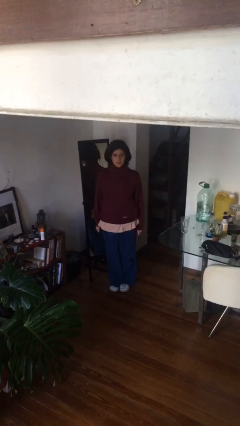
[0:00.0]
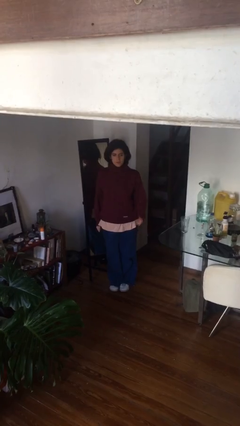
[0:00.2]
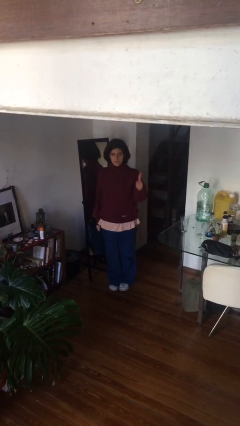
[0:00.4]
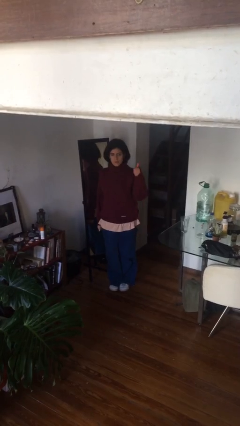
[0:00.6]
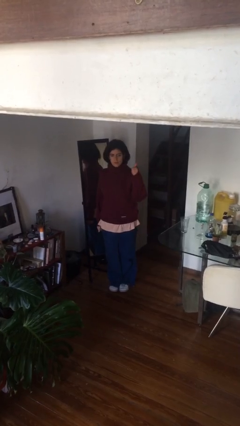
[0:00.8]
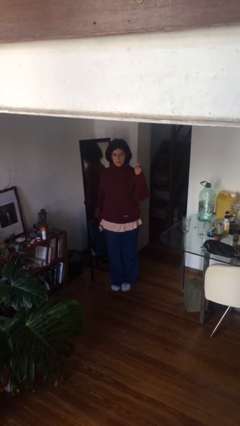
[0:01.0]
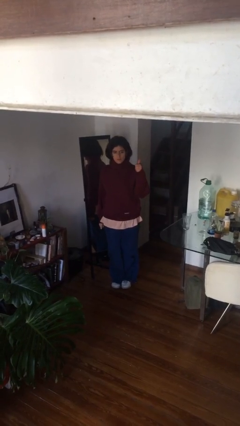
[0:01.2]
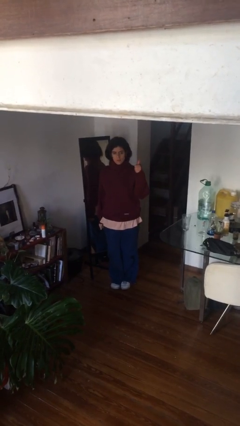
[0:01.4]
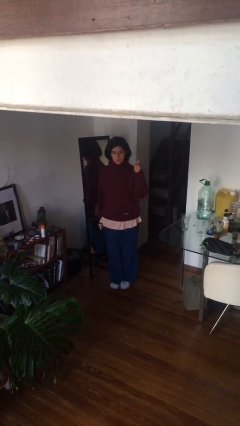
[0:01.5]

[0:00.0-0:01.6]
person gestures thumbs up

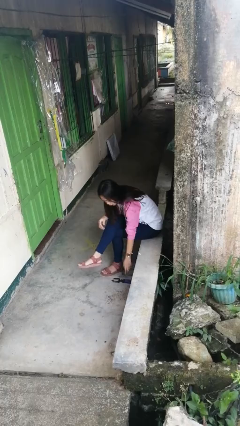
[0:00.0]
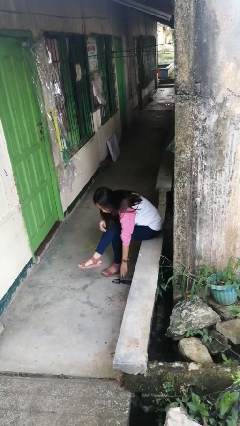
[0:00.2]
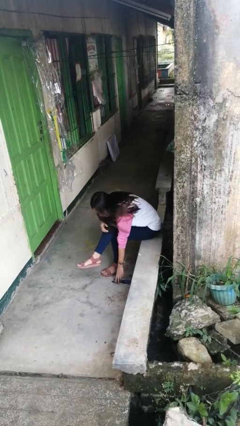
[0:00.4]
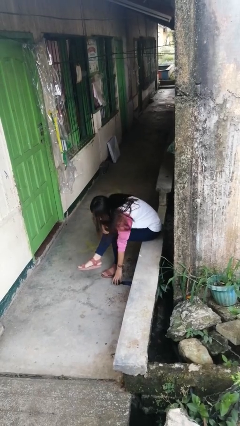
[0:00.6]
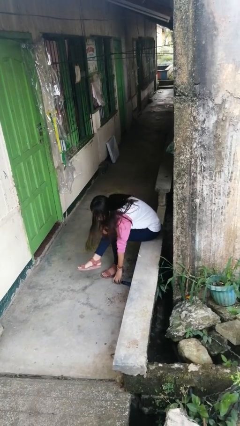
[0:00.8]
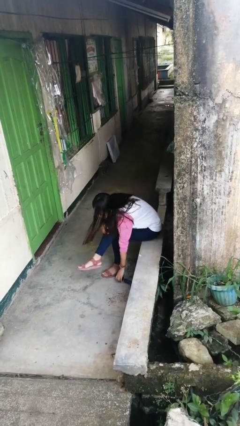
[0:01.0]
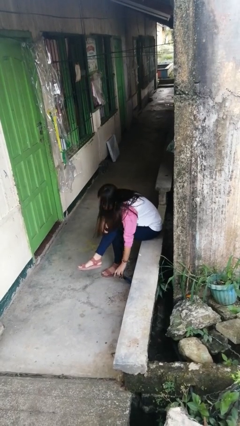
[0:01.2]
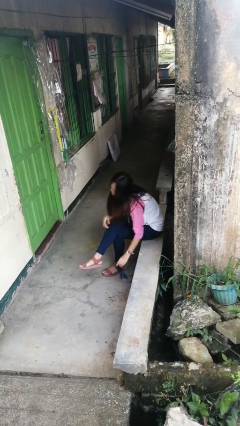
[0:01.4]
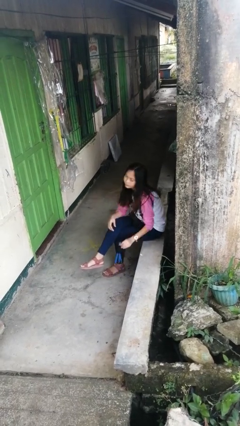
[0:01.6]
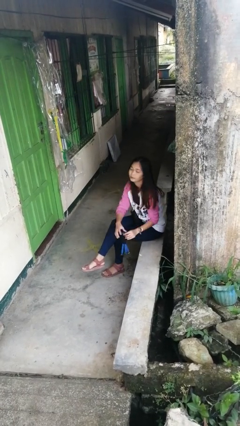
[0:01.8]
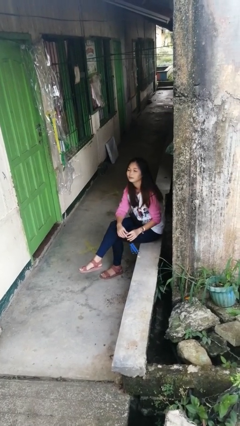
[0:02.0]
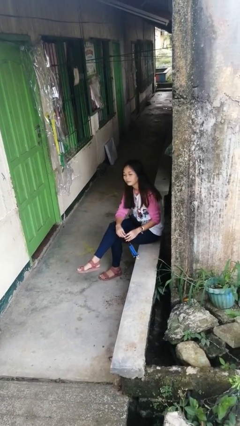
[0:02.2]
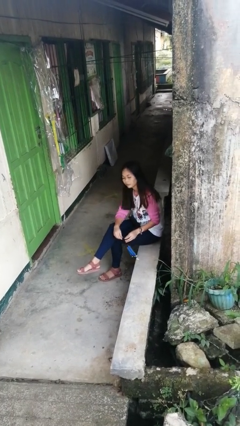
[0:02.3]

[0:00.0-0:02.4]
person picks up object from floor

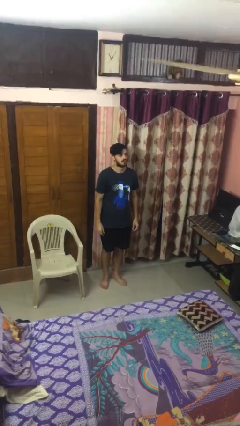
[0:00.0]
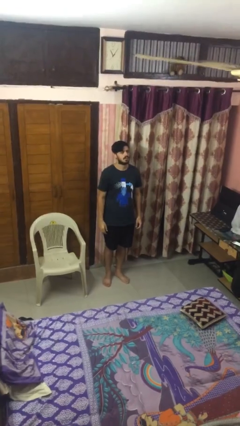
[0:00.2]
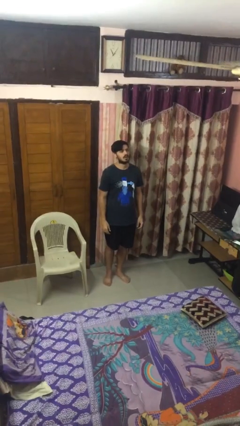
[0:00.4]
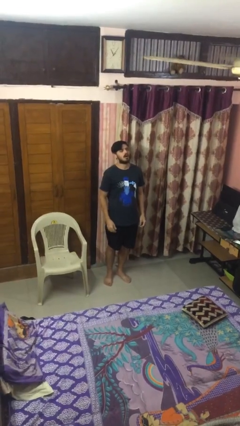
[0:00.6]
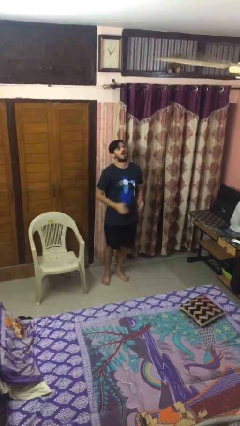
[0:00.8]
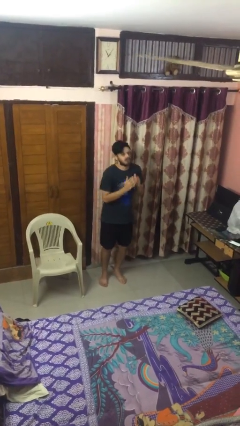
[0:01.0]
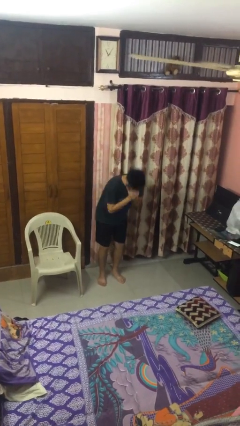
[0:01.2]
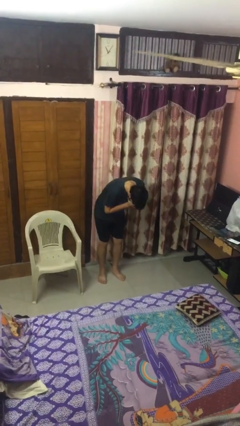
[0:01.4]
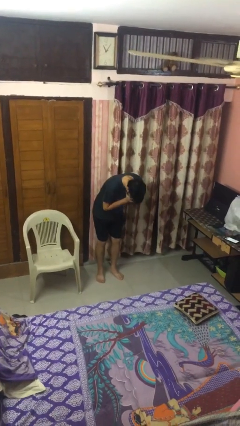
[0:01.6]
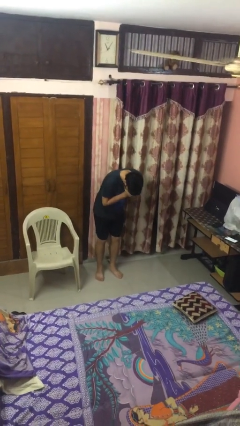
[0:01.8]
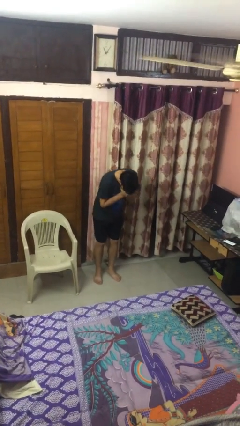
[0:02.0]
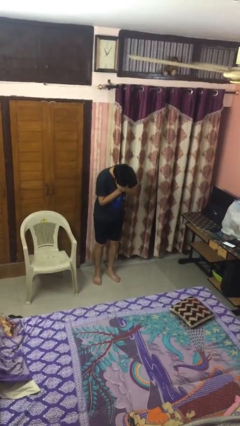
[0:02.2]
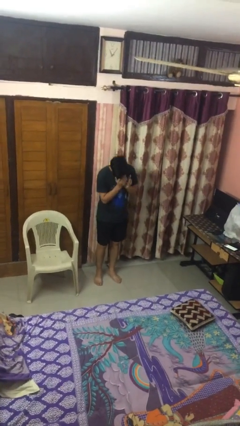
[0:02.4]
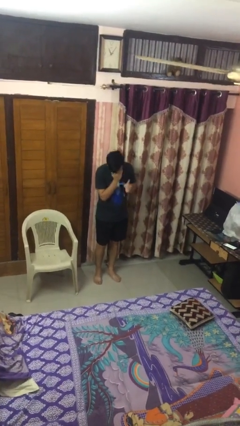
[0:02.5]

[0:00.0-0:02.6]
person sneezes into hand

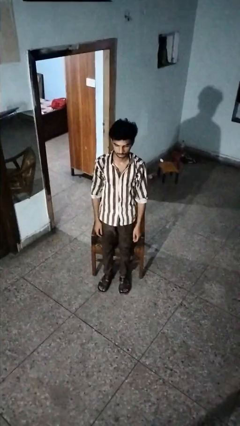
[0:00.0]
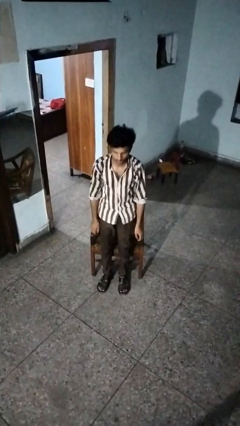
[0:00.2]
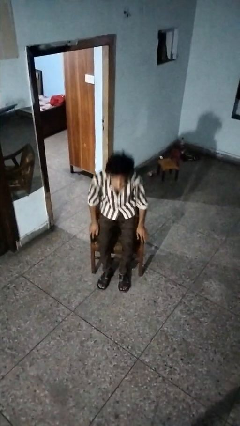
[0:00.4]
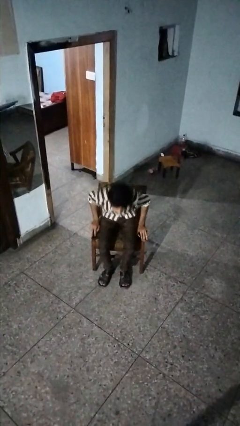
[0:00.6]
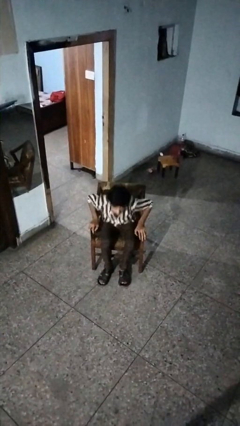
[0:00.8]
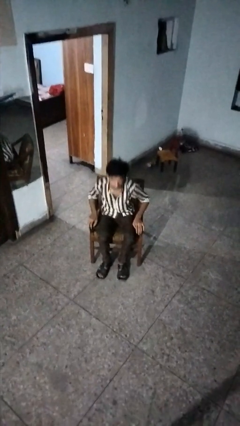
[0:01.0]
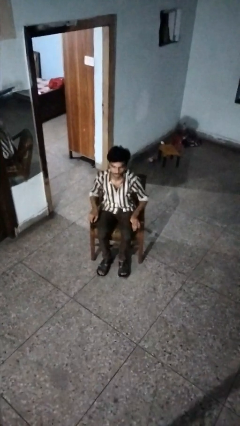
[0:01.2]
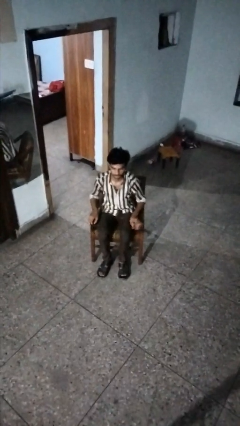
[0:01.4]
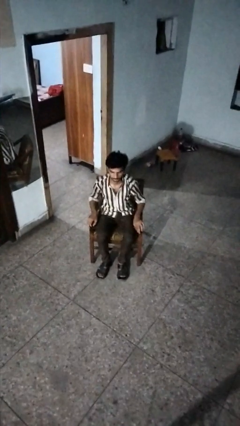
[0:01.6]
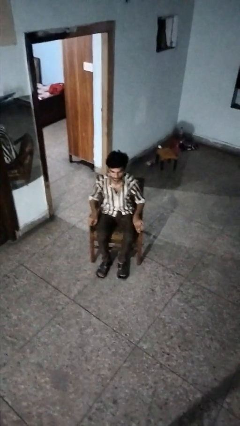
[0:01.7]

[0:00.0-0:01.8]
person sits down

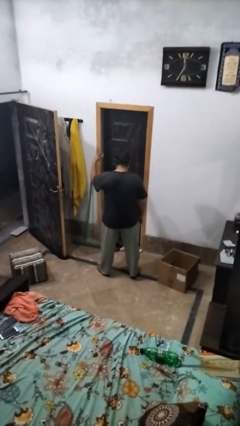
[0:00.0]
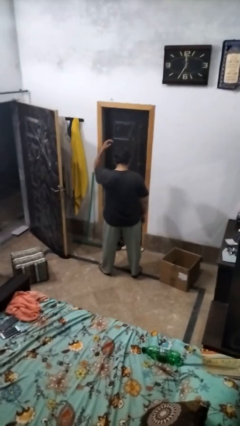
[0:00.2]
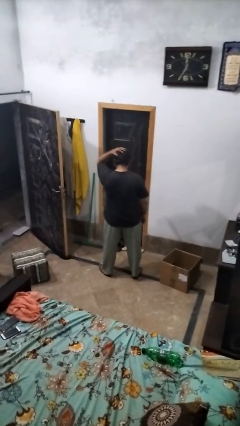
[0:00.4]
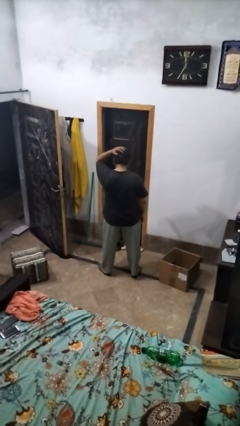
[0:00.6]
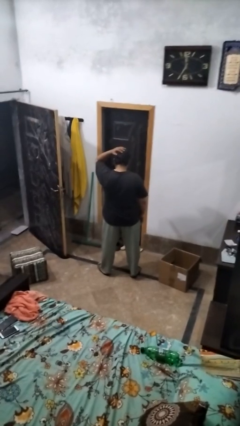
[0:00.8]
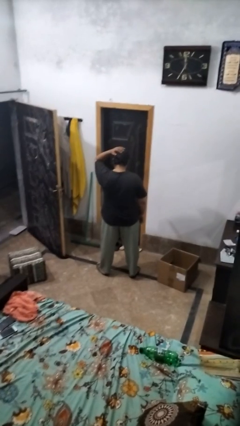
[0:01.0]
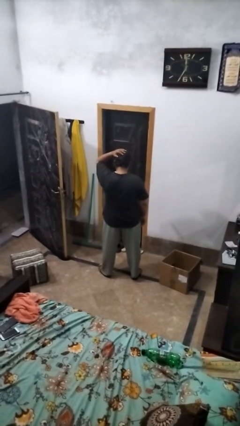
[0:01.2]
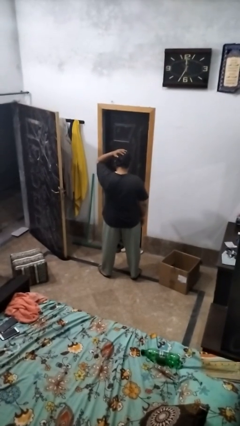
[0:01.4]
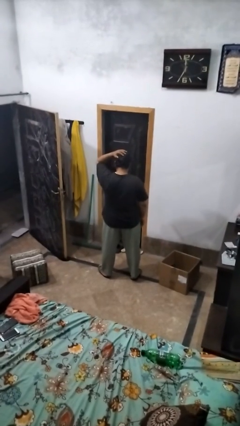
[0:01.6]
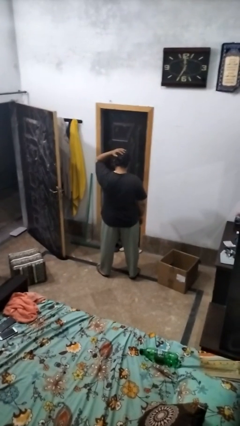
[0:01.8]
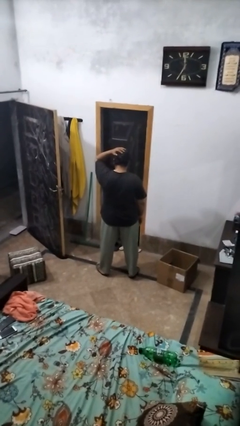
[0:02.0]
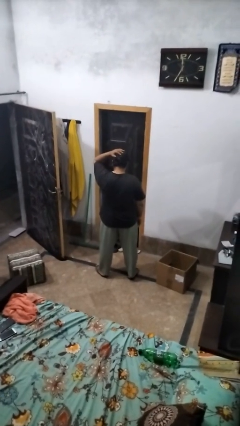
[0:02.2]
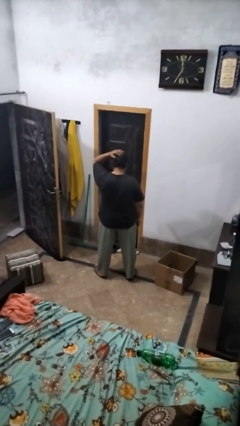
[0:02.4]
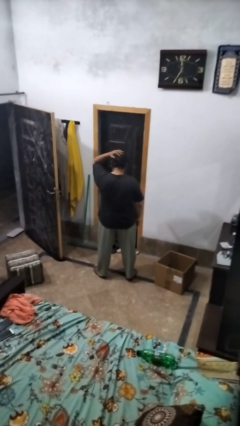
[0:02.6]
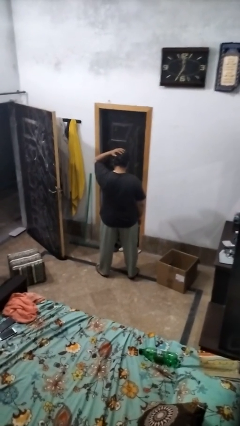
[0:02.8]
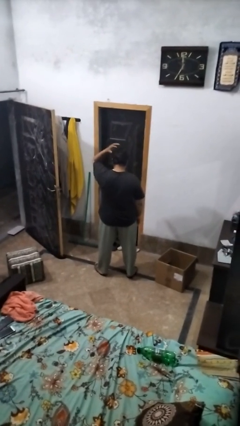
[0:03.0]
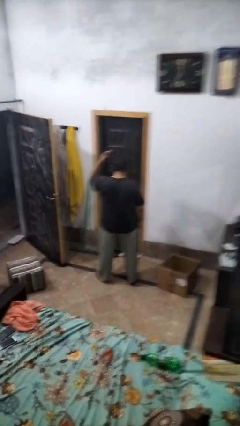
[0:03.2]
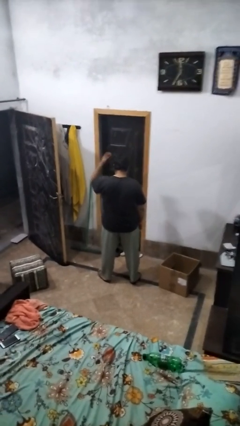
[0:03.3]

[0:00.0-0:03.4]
person pats head

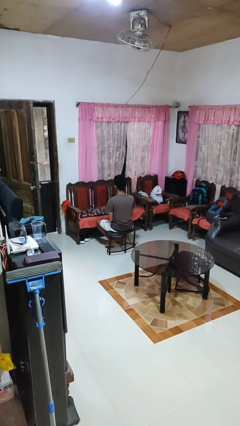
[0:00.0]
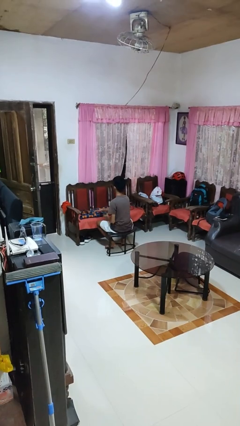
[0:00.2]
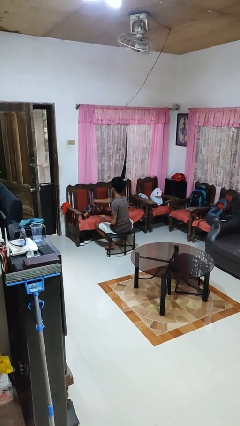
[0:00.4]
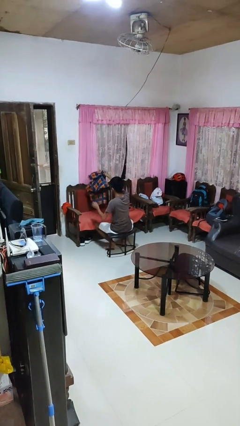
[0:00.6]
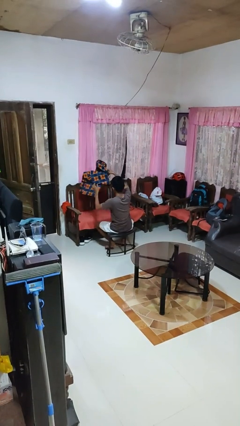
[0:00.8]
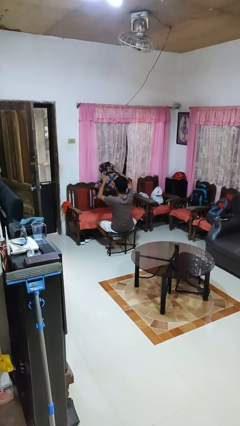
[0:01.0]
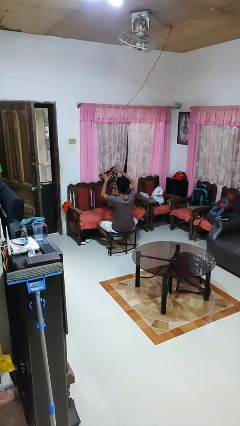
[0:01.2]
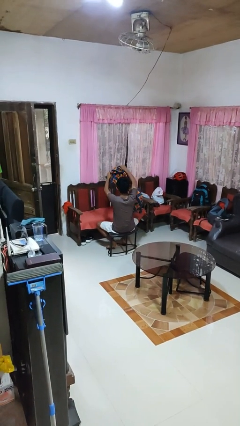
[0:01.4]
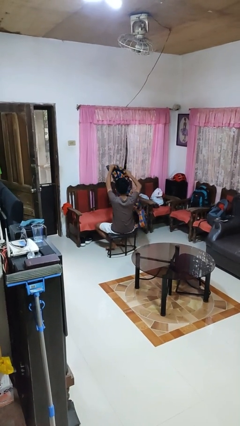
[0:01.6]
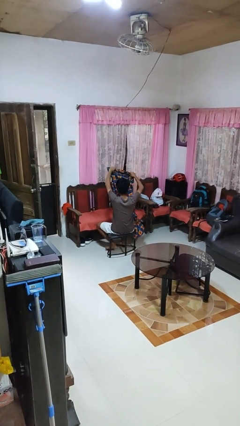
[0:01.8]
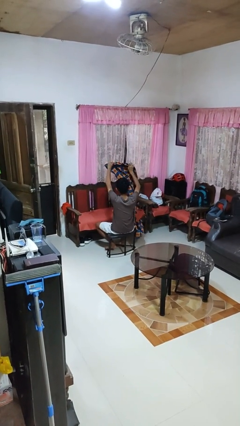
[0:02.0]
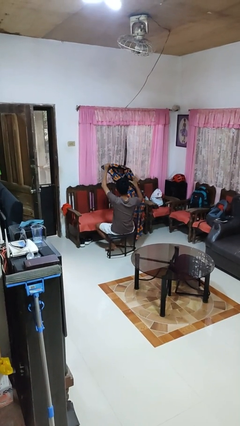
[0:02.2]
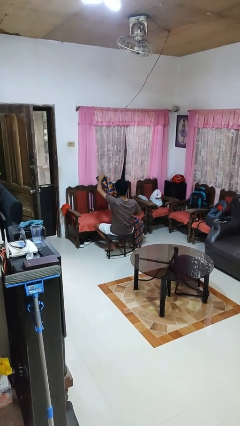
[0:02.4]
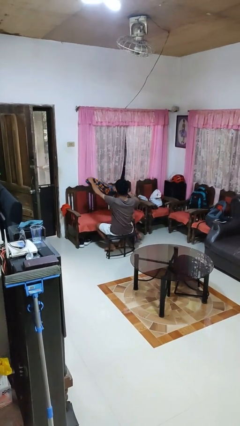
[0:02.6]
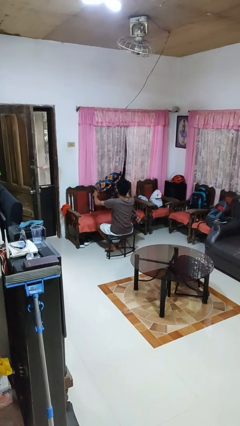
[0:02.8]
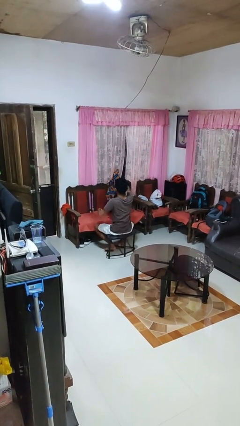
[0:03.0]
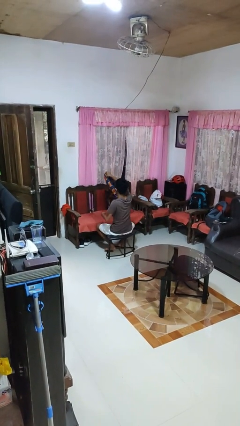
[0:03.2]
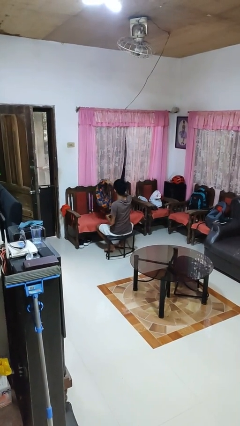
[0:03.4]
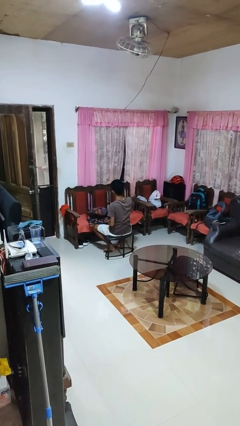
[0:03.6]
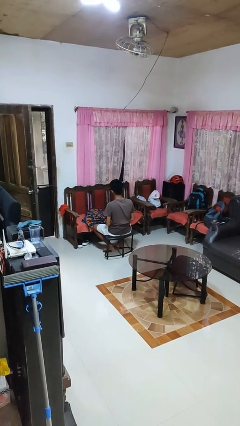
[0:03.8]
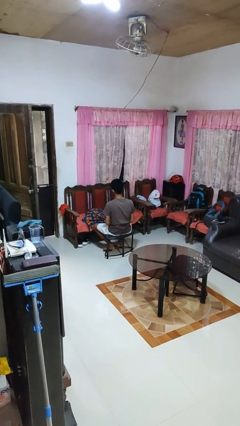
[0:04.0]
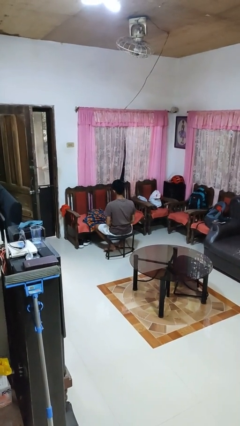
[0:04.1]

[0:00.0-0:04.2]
person unfolds blanket

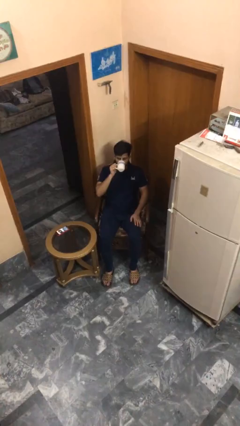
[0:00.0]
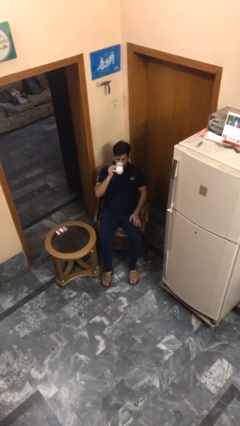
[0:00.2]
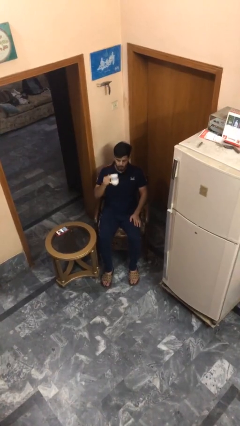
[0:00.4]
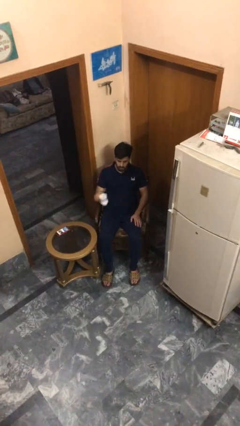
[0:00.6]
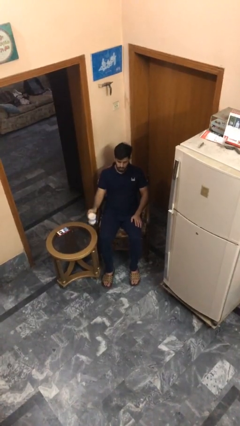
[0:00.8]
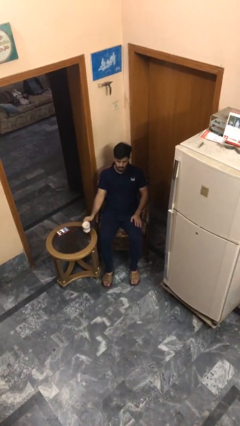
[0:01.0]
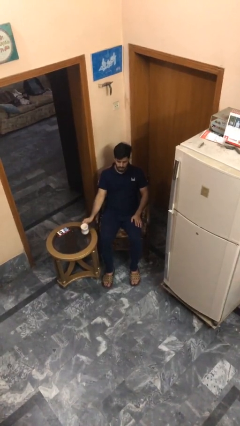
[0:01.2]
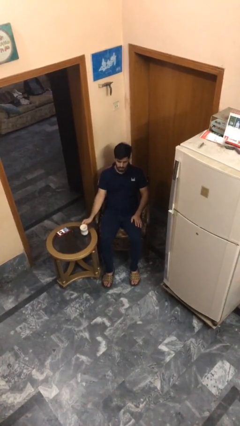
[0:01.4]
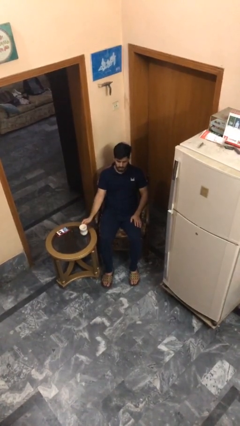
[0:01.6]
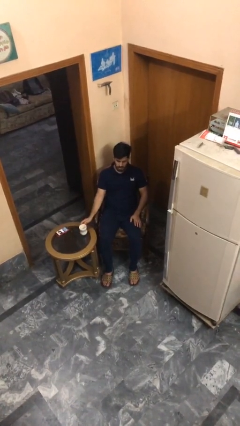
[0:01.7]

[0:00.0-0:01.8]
person puts down object on table
